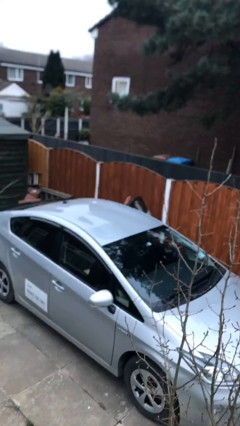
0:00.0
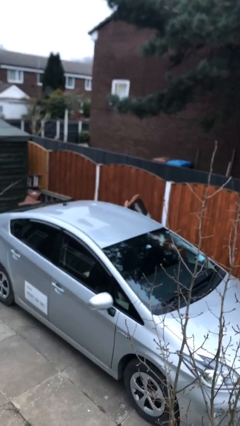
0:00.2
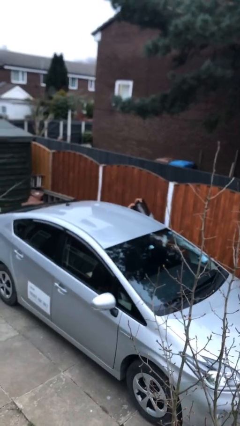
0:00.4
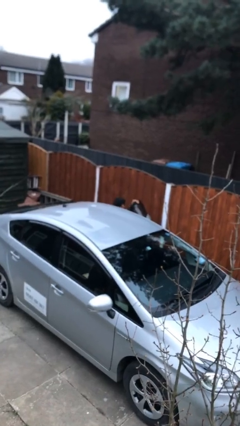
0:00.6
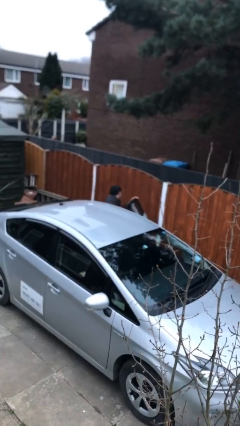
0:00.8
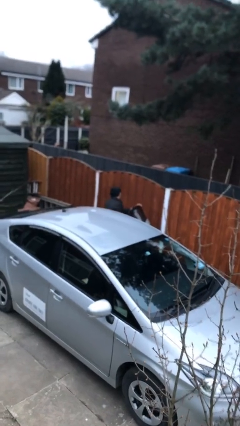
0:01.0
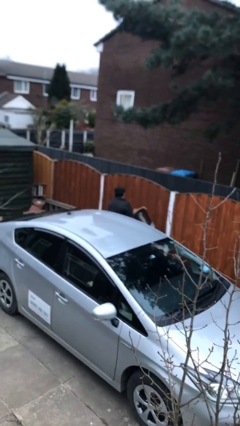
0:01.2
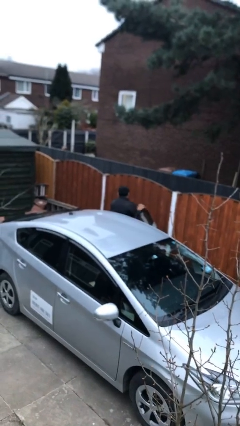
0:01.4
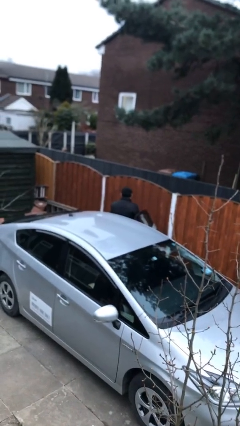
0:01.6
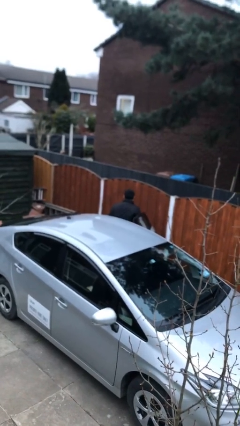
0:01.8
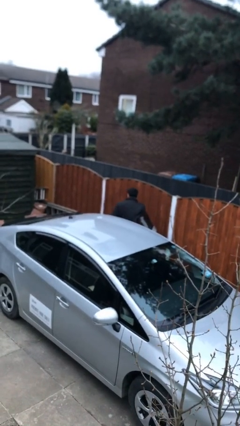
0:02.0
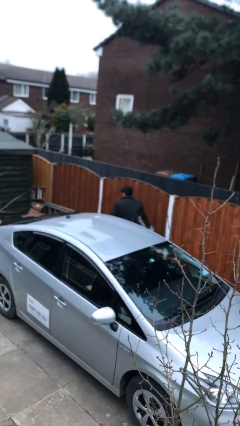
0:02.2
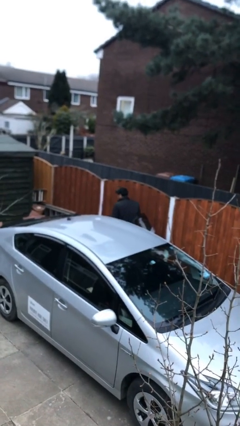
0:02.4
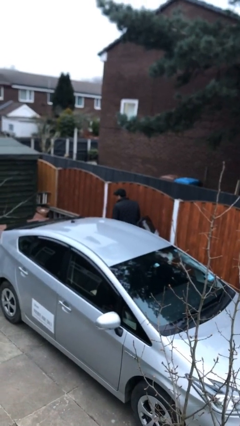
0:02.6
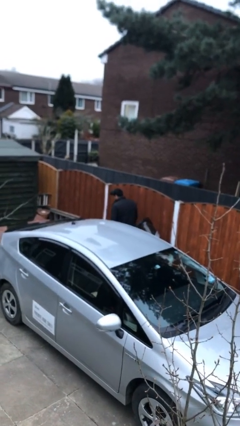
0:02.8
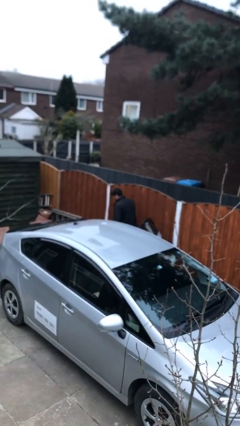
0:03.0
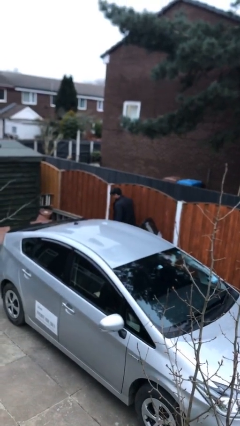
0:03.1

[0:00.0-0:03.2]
person exits car

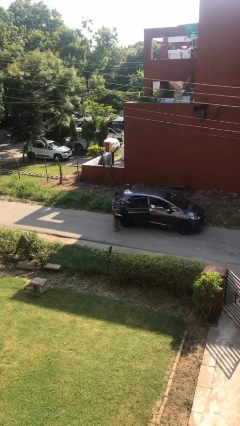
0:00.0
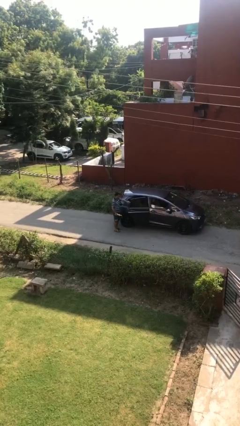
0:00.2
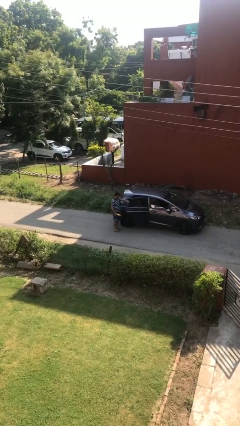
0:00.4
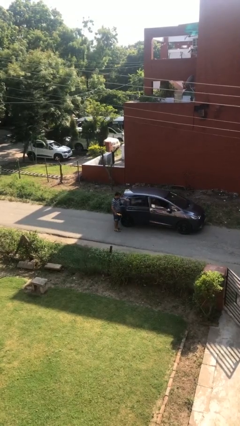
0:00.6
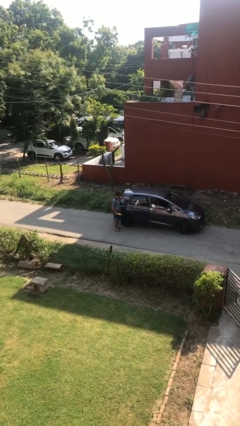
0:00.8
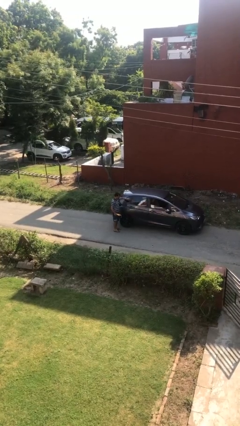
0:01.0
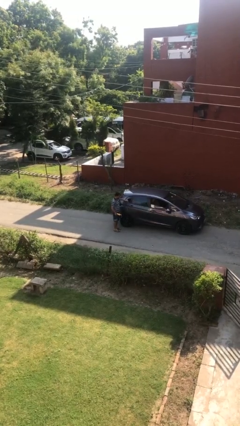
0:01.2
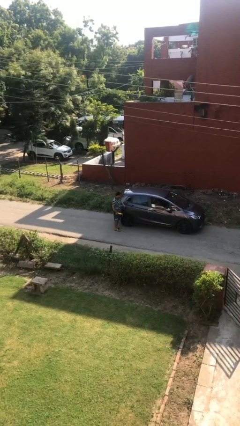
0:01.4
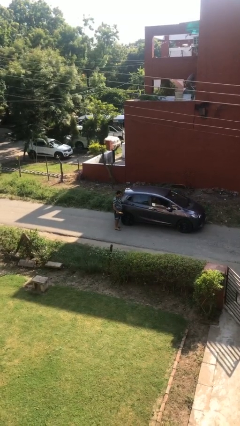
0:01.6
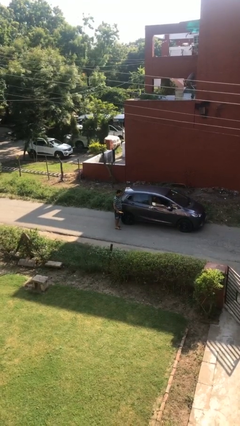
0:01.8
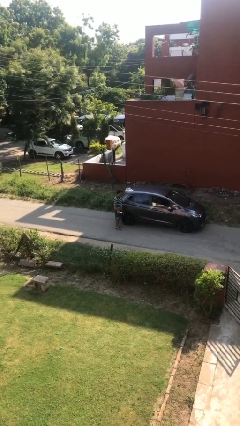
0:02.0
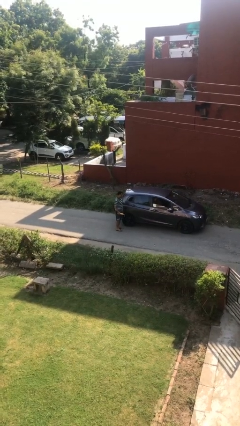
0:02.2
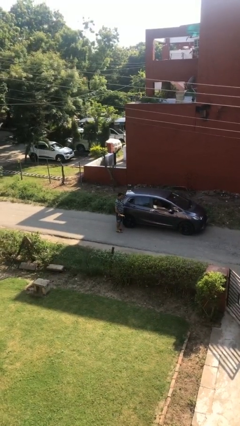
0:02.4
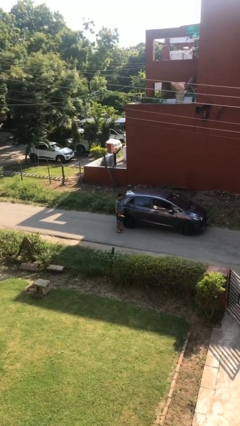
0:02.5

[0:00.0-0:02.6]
person closes car door

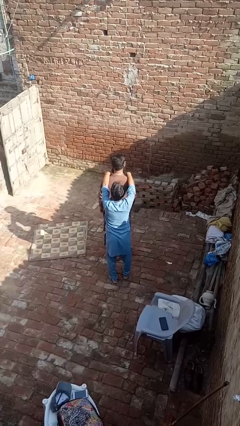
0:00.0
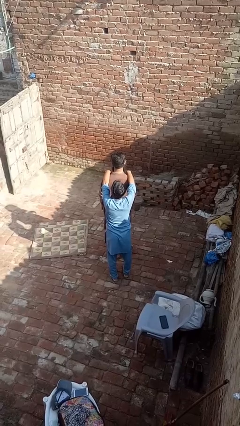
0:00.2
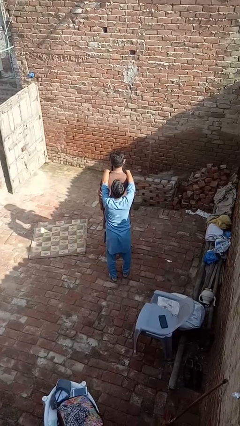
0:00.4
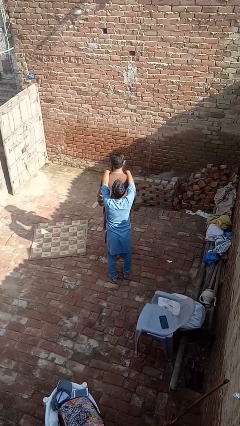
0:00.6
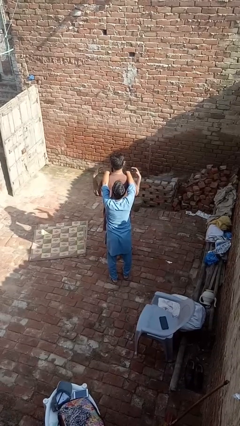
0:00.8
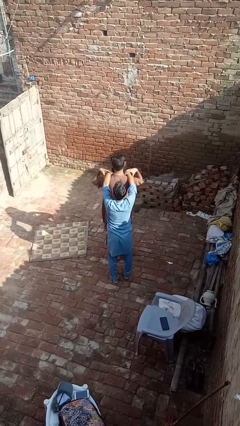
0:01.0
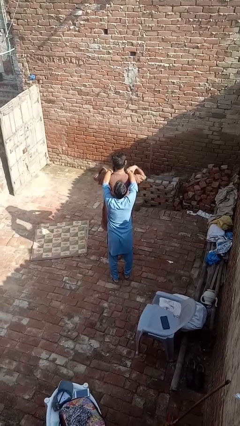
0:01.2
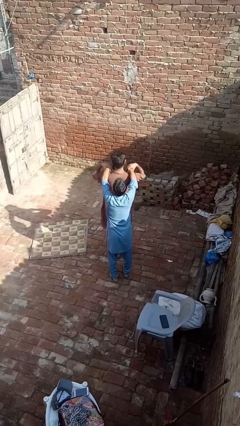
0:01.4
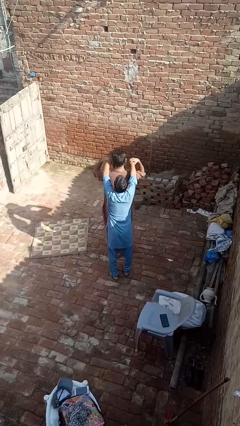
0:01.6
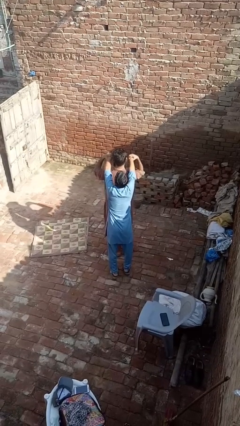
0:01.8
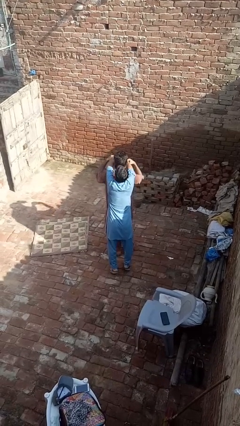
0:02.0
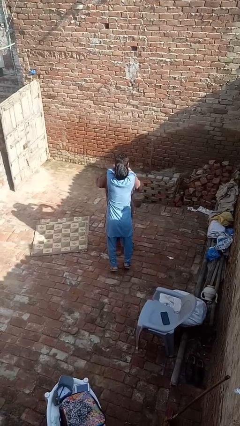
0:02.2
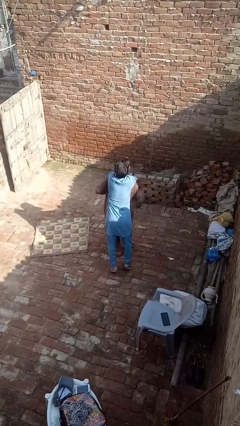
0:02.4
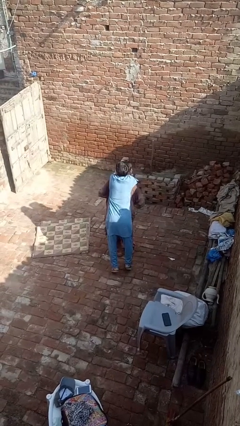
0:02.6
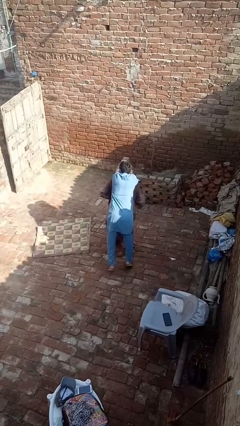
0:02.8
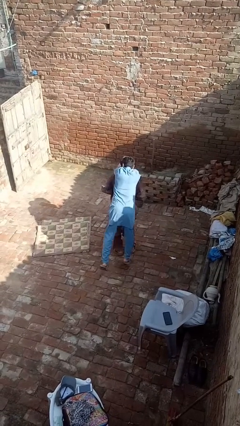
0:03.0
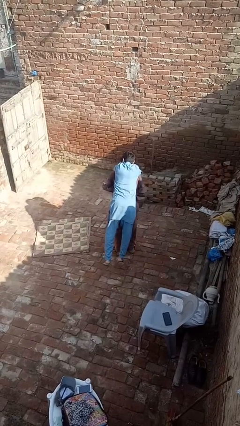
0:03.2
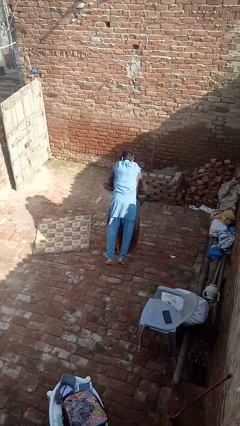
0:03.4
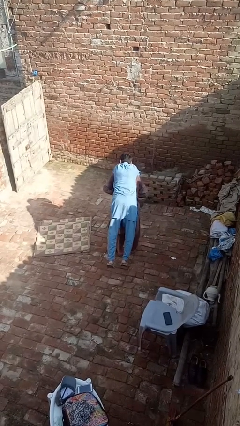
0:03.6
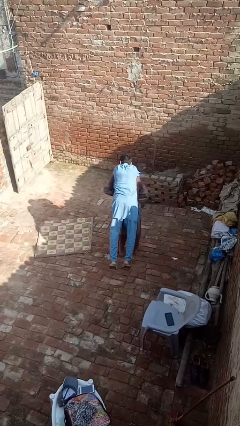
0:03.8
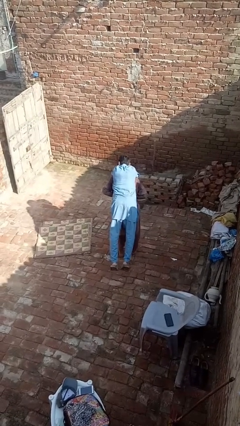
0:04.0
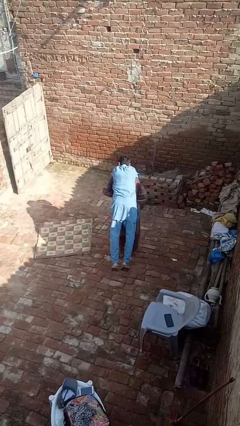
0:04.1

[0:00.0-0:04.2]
person carries person over shoulder

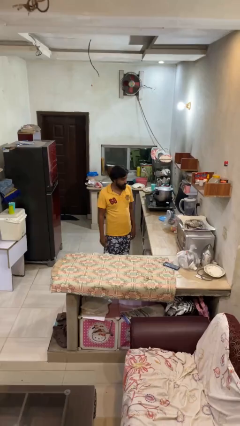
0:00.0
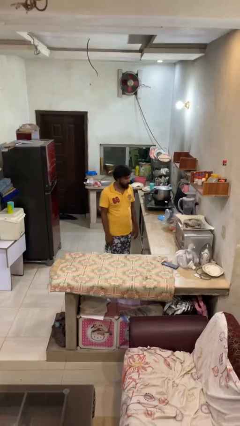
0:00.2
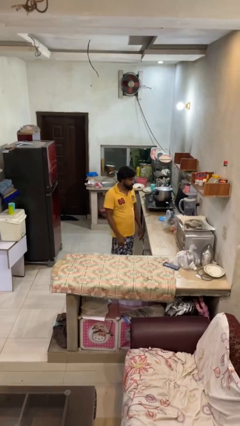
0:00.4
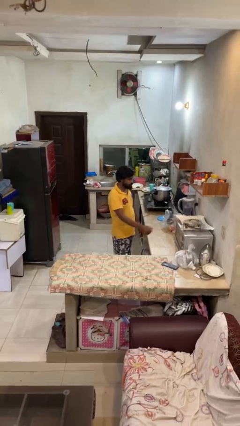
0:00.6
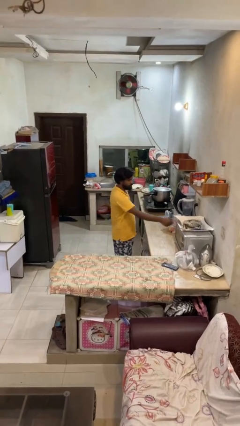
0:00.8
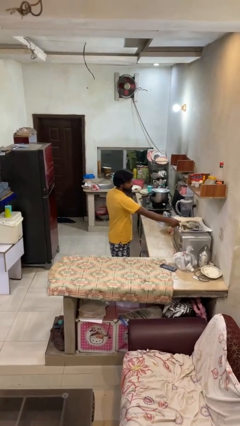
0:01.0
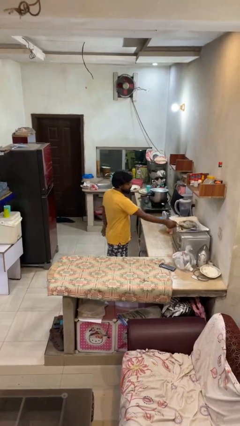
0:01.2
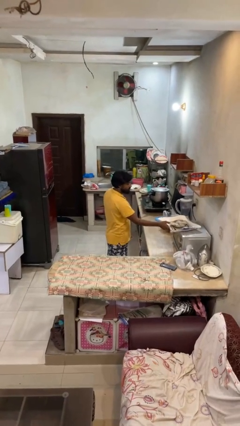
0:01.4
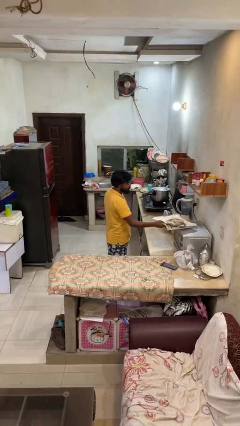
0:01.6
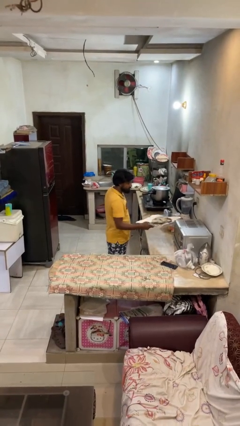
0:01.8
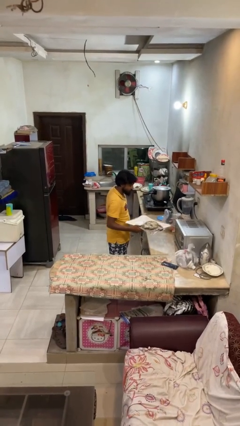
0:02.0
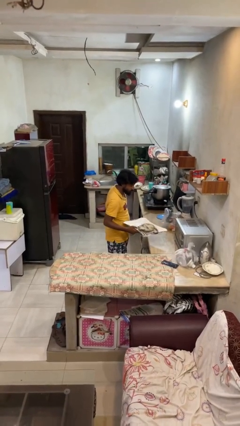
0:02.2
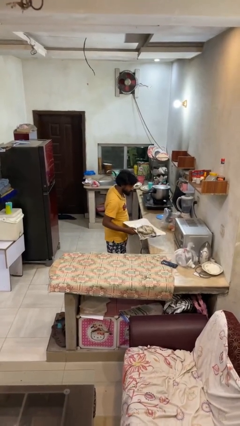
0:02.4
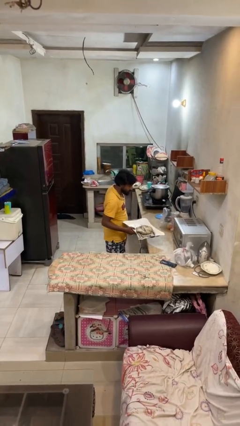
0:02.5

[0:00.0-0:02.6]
person picks up object from countertop

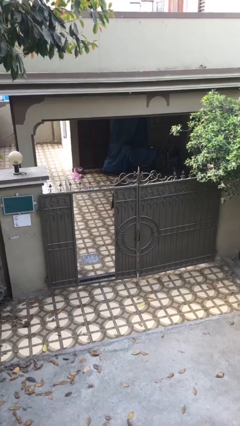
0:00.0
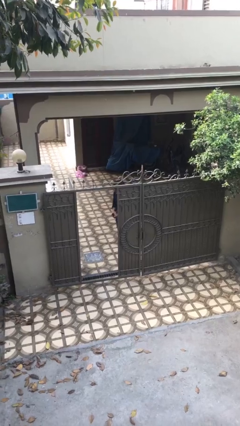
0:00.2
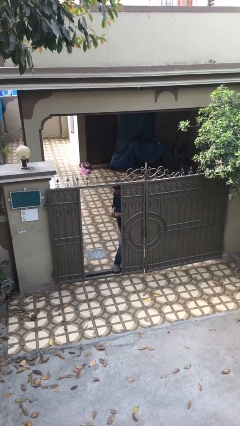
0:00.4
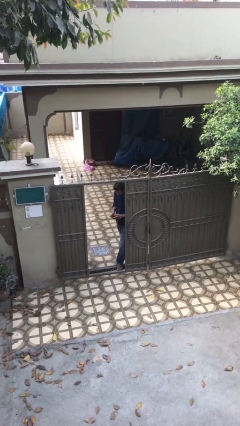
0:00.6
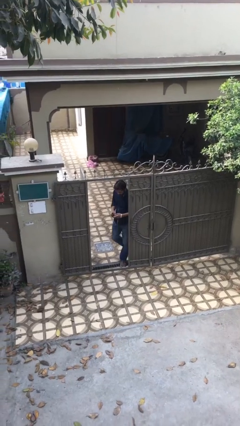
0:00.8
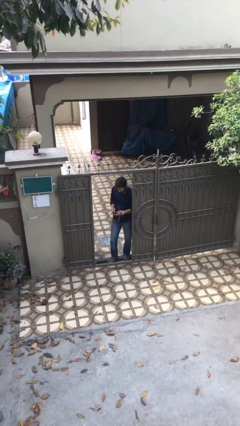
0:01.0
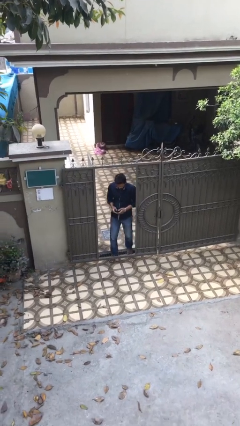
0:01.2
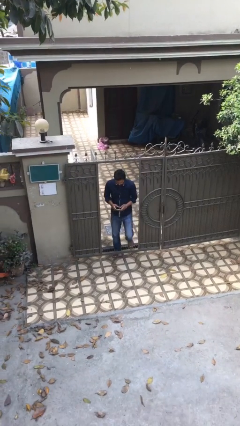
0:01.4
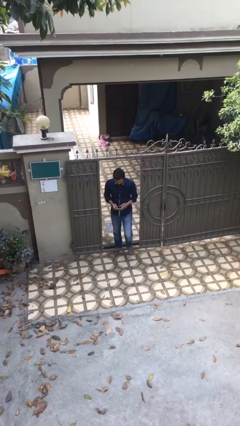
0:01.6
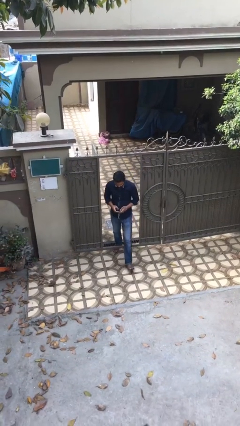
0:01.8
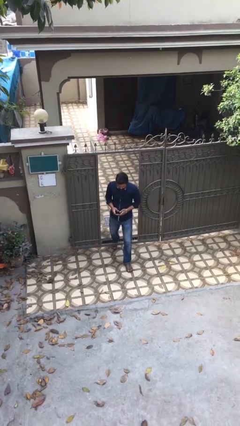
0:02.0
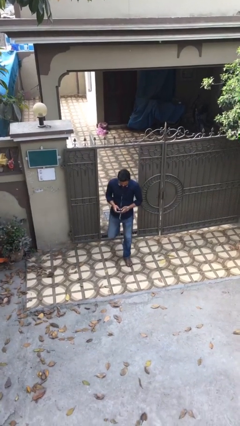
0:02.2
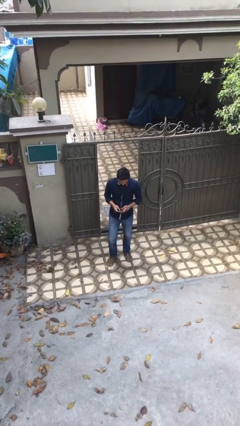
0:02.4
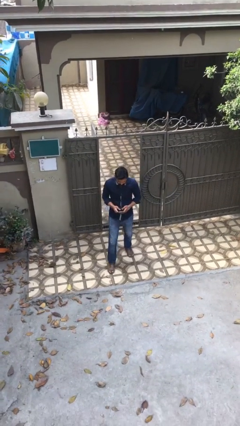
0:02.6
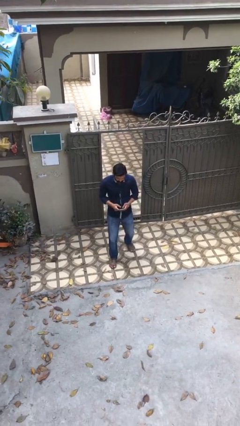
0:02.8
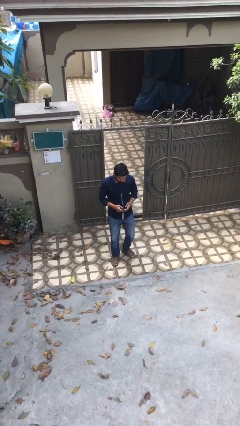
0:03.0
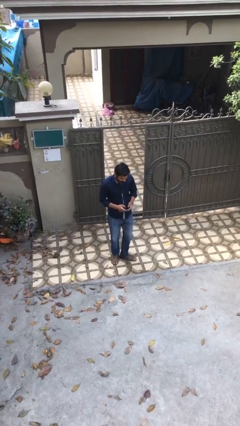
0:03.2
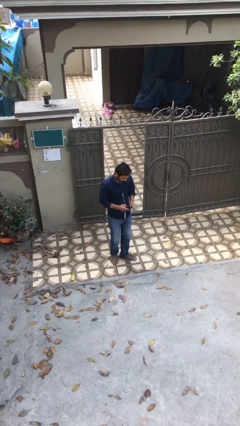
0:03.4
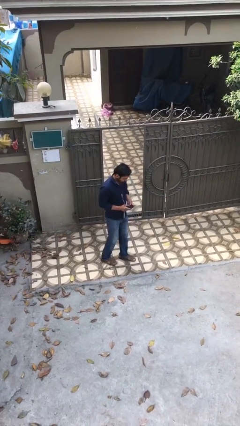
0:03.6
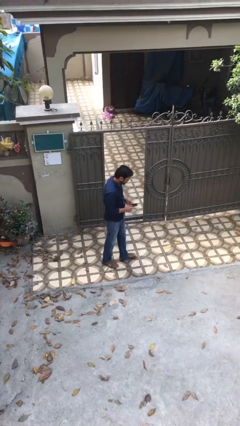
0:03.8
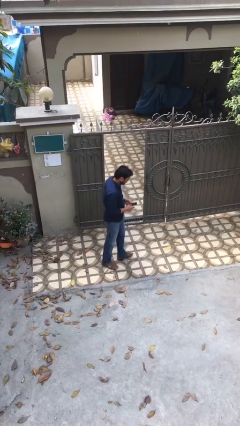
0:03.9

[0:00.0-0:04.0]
person enters scene through structure

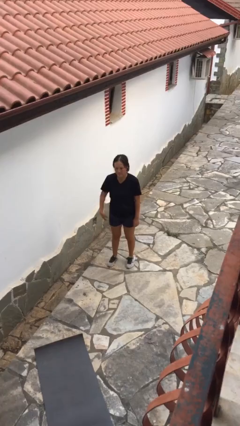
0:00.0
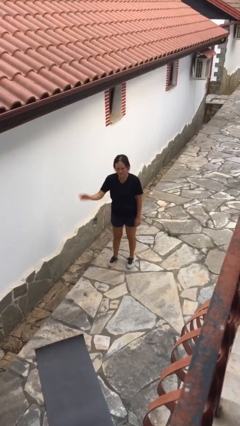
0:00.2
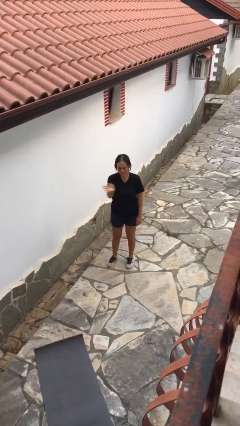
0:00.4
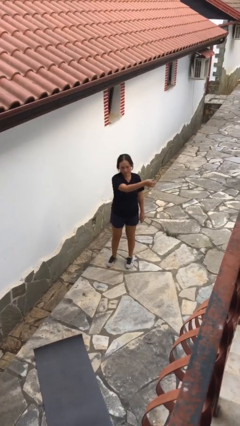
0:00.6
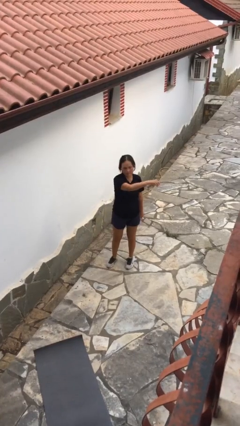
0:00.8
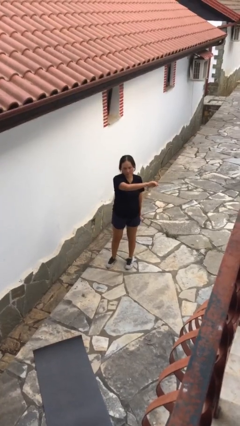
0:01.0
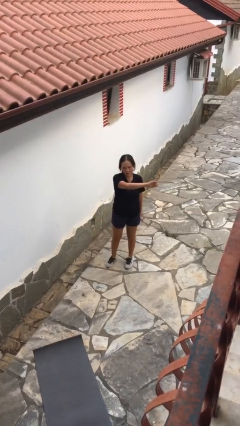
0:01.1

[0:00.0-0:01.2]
person gestures swipe left
